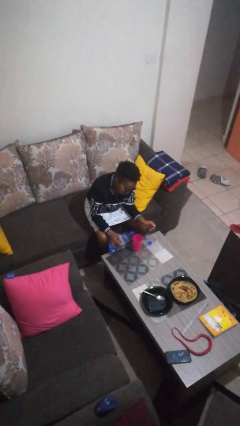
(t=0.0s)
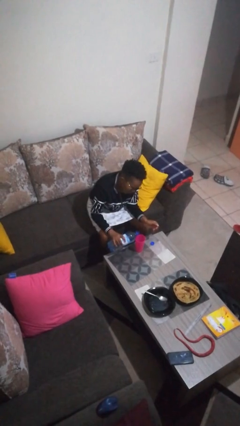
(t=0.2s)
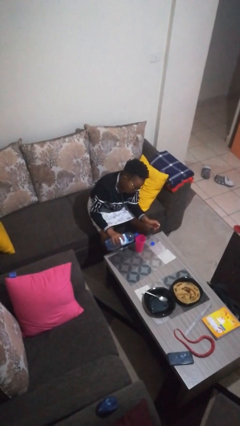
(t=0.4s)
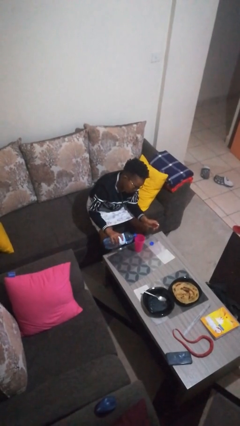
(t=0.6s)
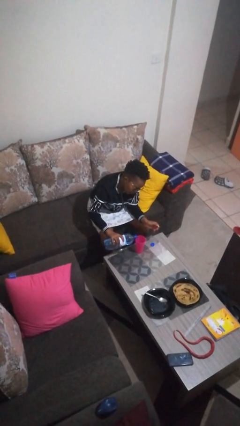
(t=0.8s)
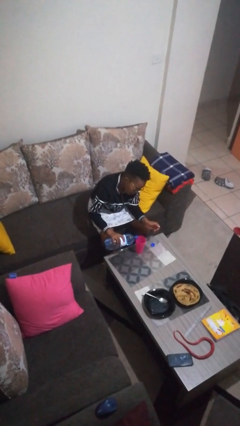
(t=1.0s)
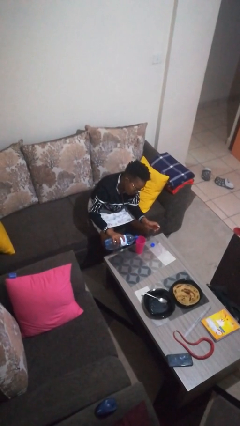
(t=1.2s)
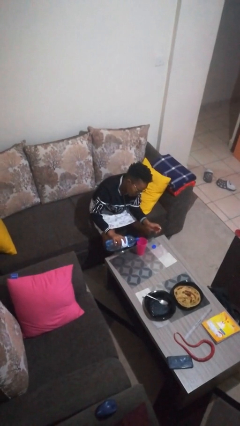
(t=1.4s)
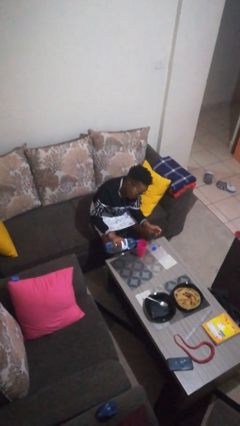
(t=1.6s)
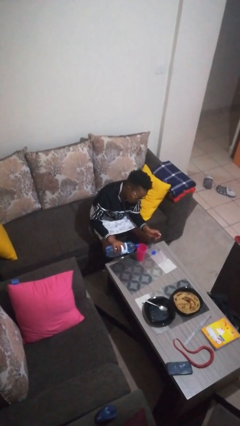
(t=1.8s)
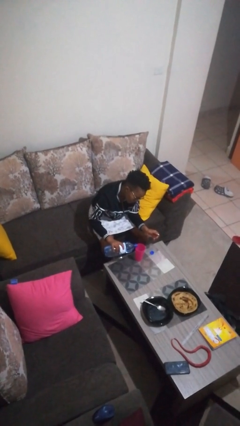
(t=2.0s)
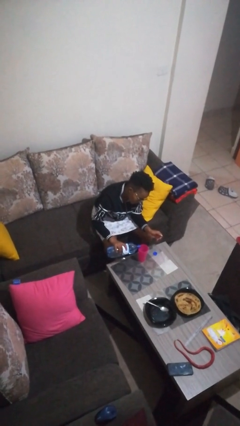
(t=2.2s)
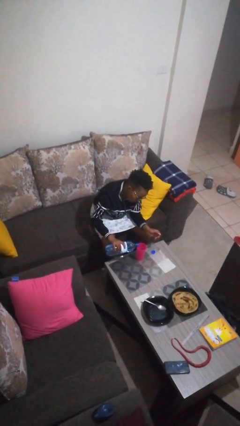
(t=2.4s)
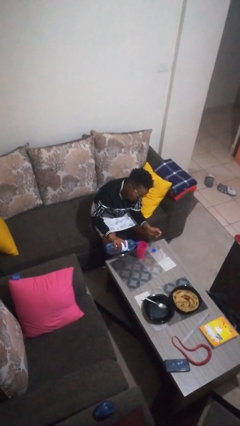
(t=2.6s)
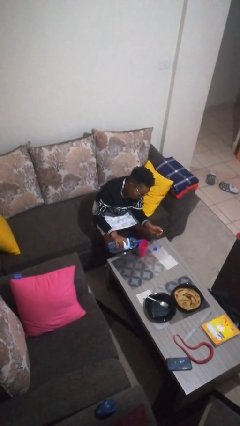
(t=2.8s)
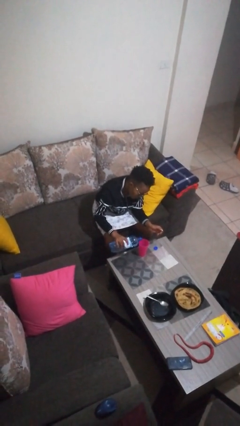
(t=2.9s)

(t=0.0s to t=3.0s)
person pours liquid into cup

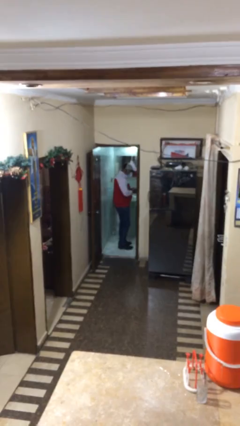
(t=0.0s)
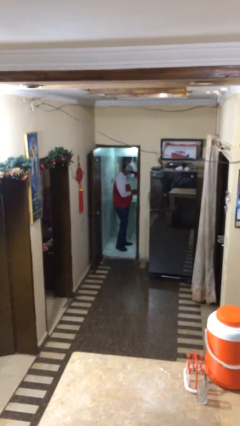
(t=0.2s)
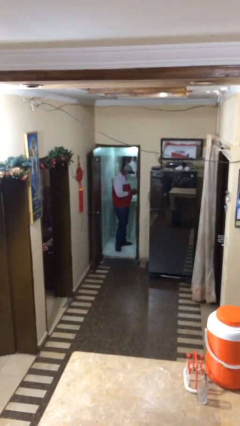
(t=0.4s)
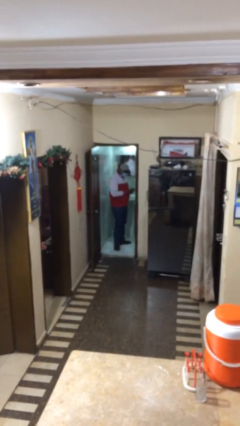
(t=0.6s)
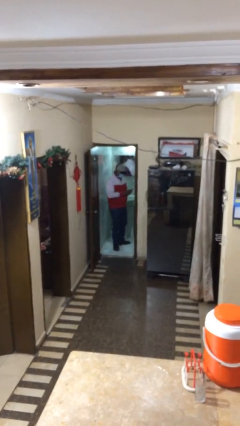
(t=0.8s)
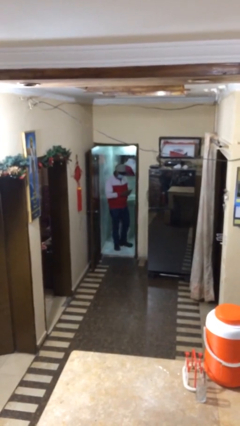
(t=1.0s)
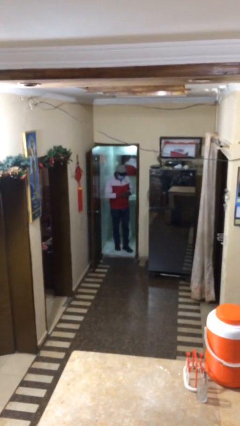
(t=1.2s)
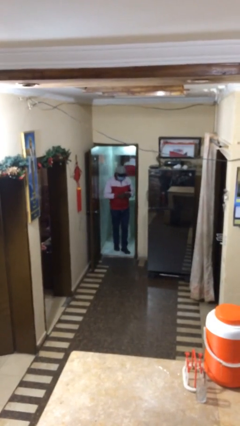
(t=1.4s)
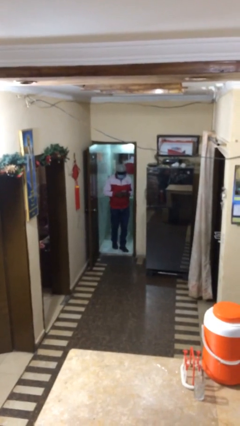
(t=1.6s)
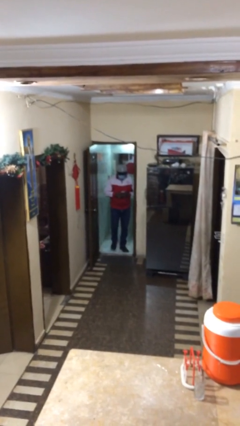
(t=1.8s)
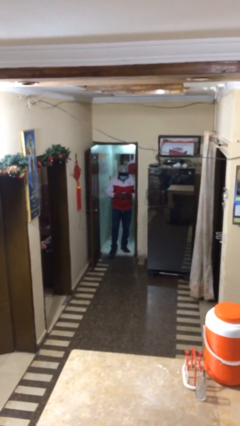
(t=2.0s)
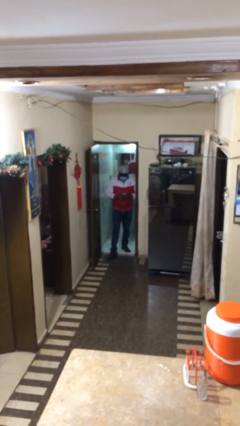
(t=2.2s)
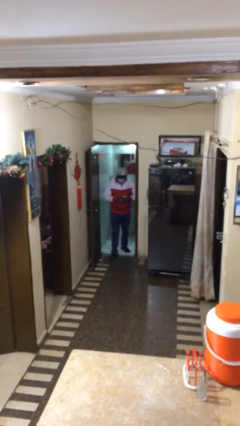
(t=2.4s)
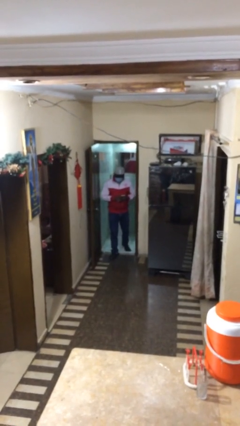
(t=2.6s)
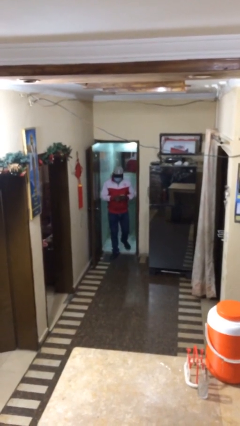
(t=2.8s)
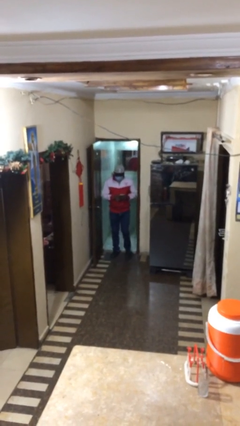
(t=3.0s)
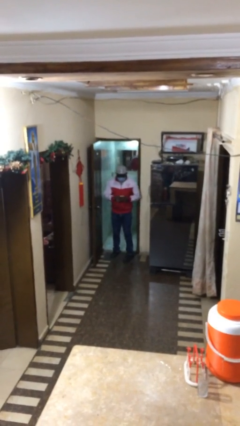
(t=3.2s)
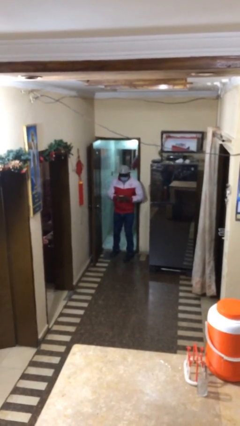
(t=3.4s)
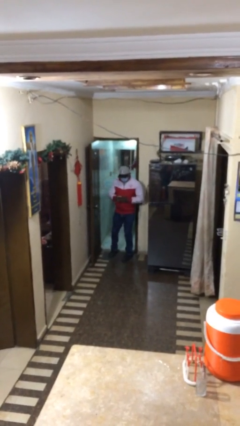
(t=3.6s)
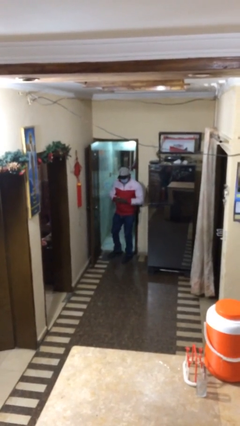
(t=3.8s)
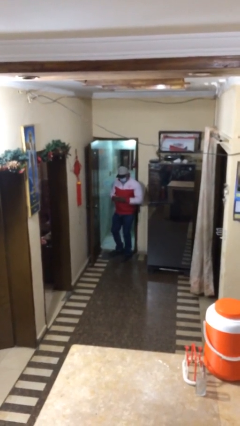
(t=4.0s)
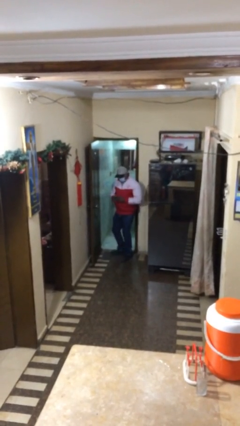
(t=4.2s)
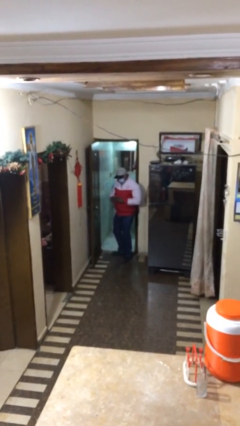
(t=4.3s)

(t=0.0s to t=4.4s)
person enters scene through structure

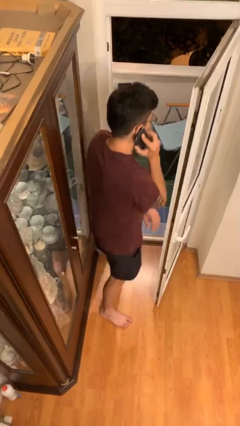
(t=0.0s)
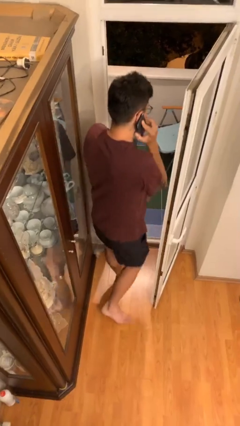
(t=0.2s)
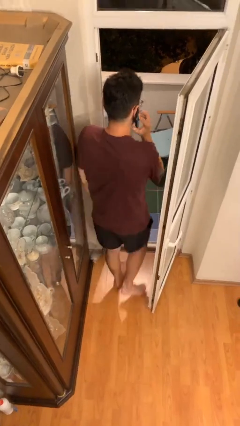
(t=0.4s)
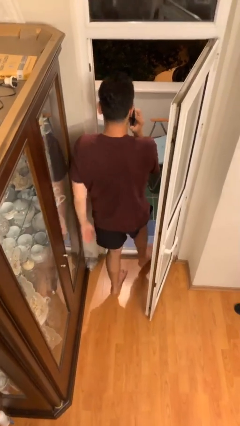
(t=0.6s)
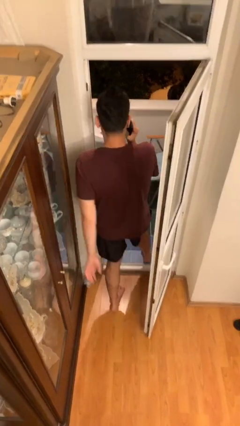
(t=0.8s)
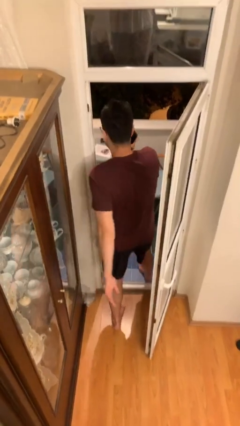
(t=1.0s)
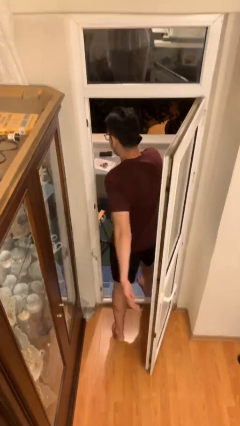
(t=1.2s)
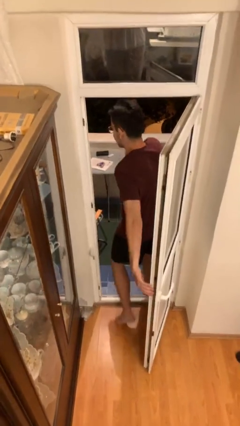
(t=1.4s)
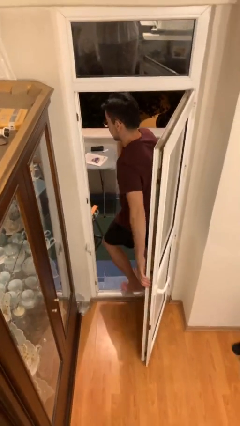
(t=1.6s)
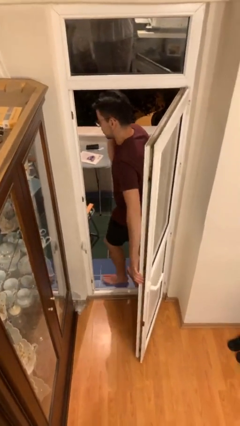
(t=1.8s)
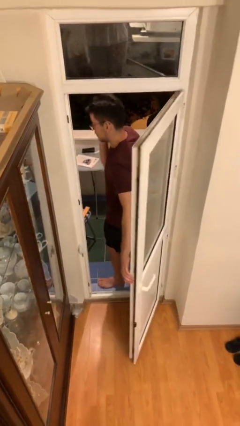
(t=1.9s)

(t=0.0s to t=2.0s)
person exits scene through structure

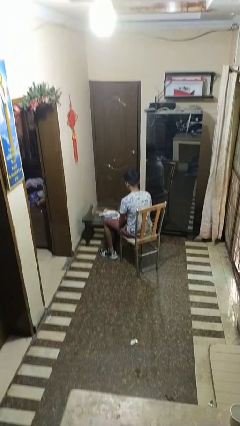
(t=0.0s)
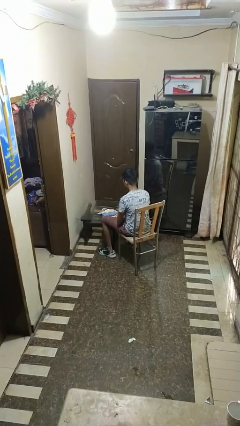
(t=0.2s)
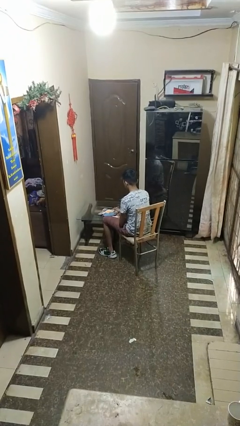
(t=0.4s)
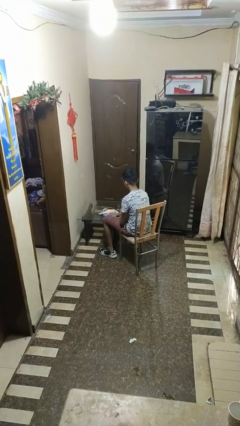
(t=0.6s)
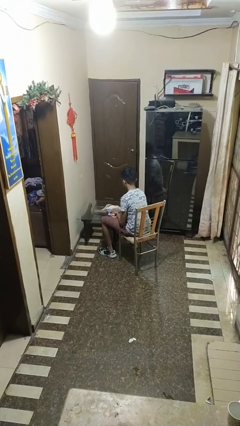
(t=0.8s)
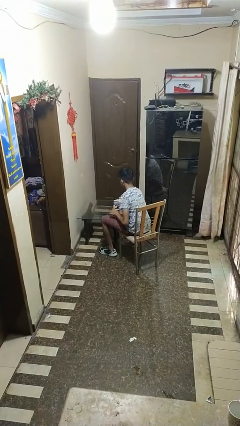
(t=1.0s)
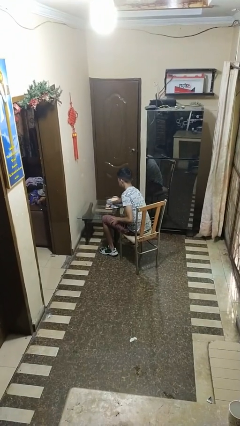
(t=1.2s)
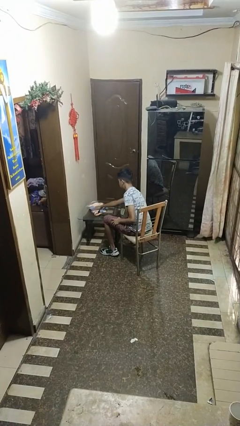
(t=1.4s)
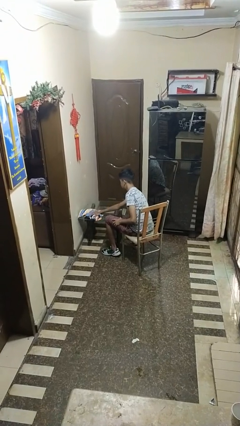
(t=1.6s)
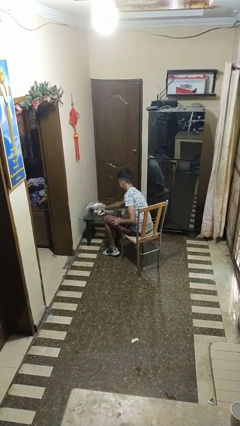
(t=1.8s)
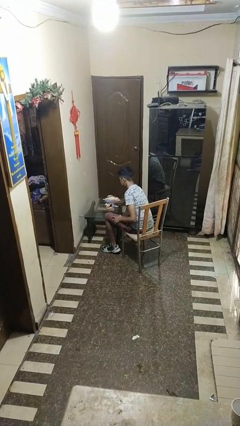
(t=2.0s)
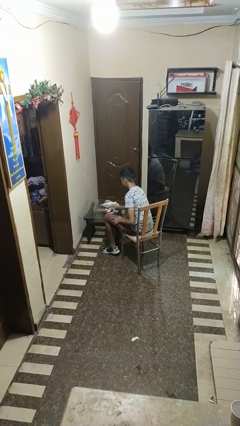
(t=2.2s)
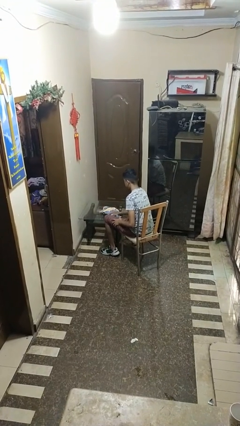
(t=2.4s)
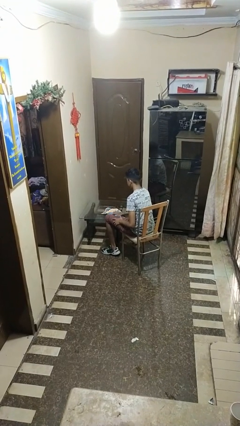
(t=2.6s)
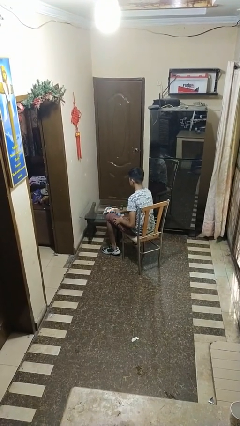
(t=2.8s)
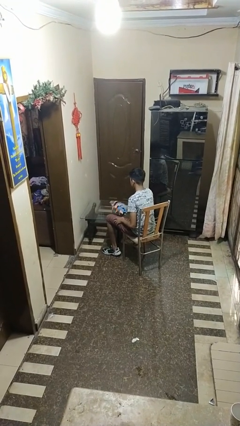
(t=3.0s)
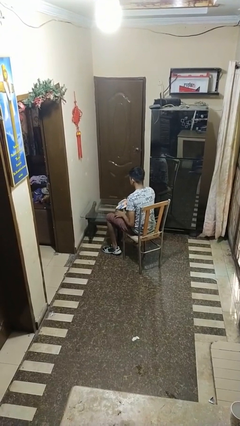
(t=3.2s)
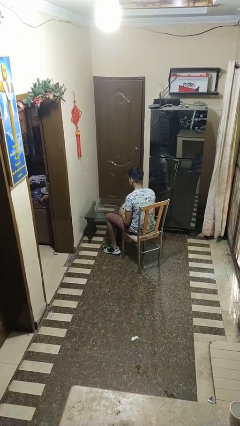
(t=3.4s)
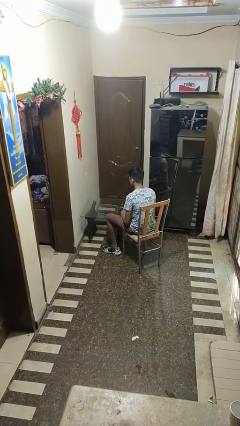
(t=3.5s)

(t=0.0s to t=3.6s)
person cleans table with rag

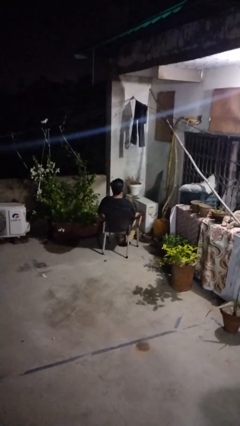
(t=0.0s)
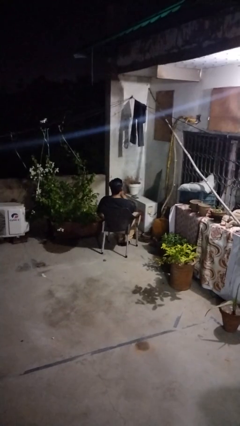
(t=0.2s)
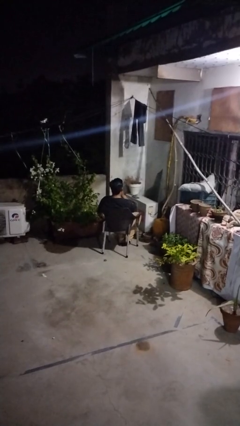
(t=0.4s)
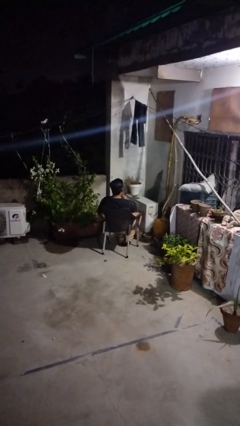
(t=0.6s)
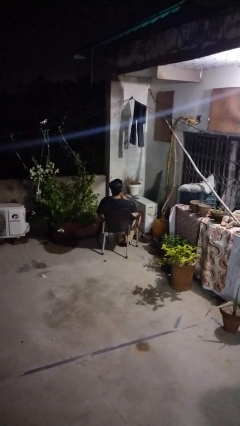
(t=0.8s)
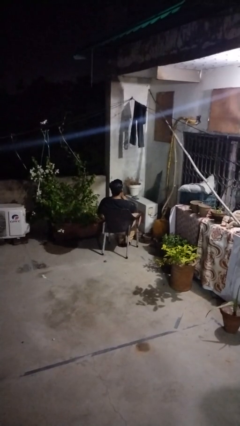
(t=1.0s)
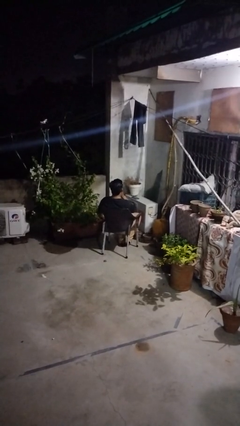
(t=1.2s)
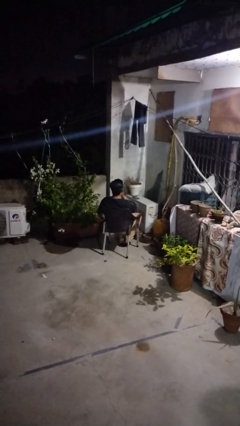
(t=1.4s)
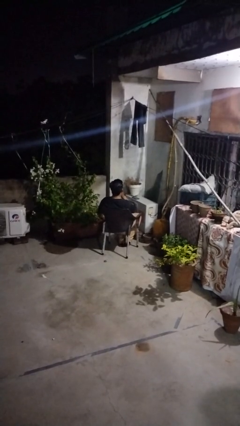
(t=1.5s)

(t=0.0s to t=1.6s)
person gestures be quiet

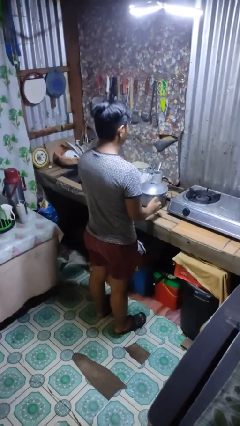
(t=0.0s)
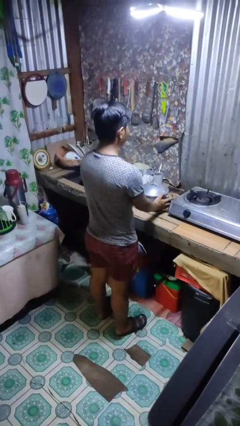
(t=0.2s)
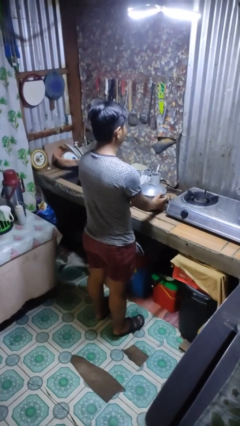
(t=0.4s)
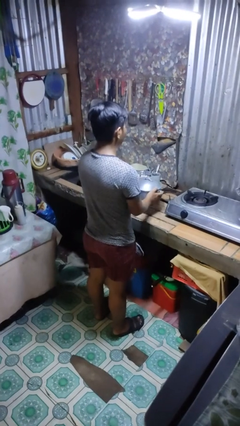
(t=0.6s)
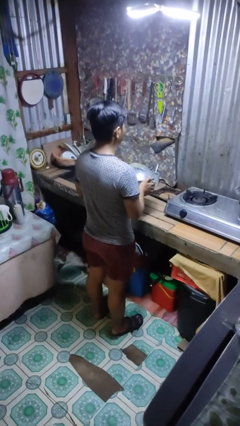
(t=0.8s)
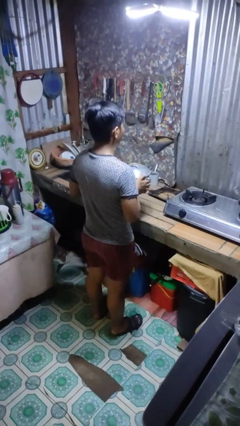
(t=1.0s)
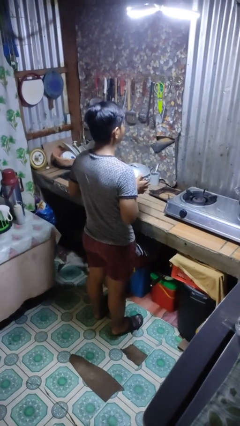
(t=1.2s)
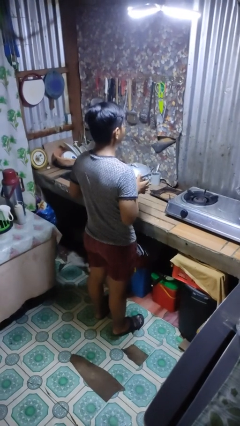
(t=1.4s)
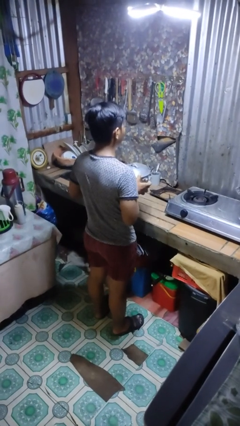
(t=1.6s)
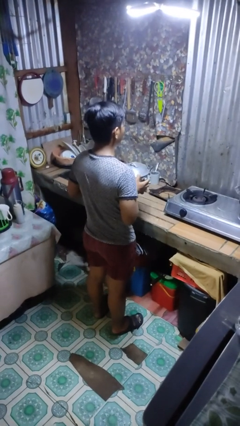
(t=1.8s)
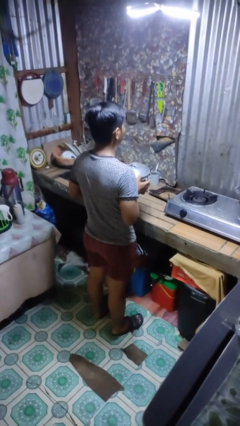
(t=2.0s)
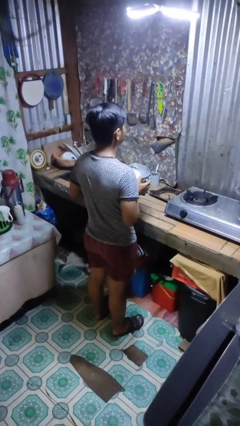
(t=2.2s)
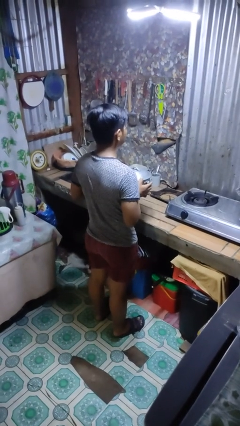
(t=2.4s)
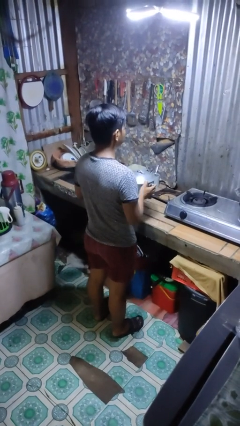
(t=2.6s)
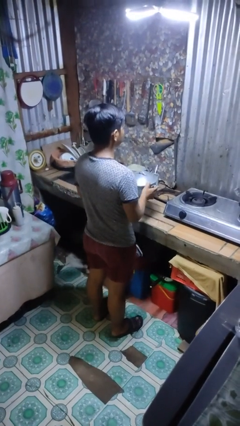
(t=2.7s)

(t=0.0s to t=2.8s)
person picks up object from countertop
